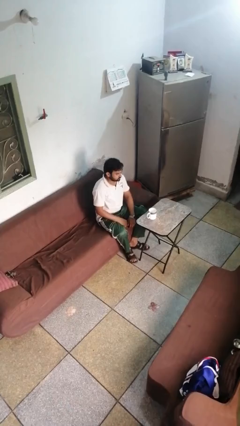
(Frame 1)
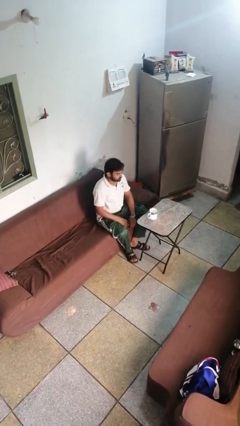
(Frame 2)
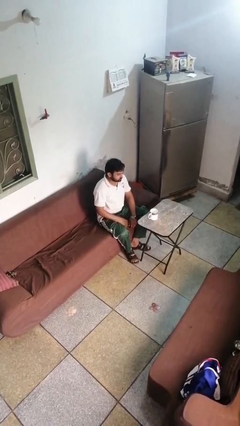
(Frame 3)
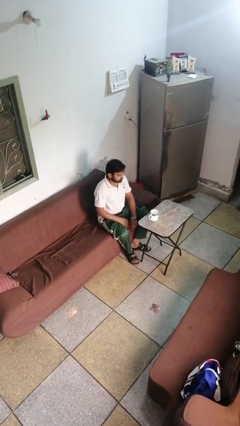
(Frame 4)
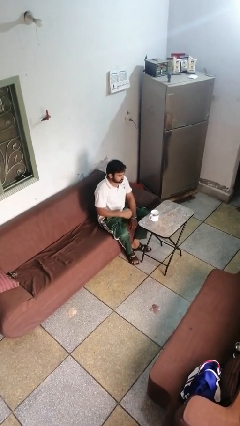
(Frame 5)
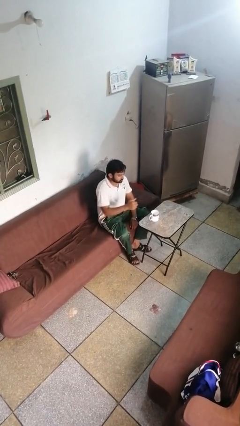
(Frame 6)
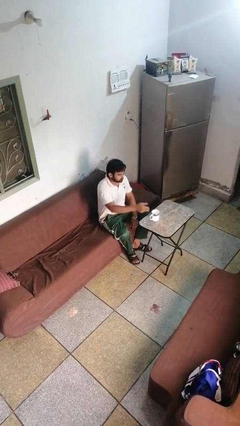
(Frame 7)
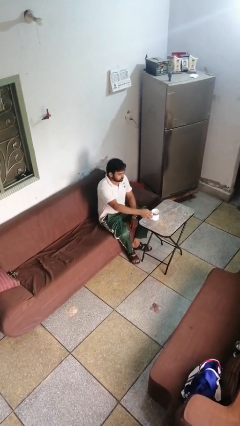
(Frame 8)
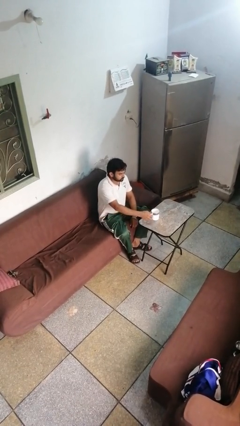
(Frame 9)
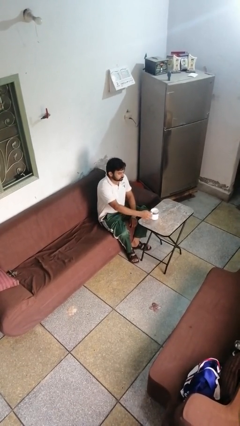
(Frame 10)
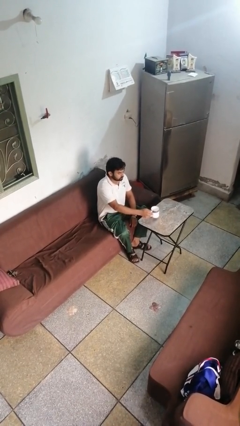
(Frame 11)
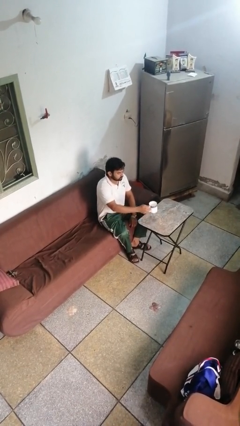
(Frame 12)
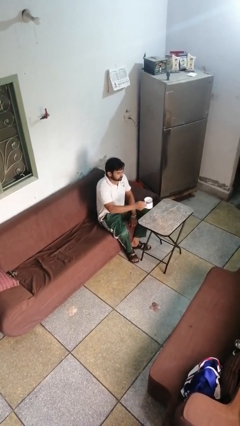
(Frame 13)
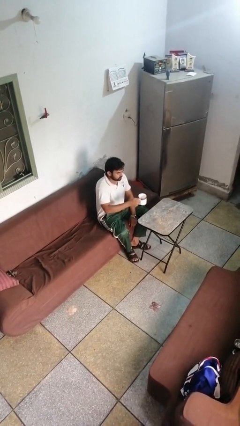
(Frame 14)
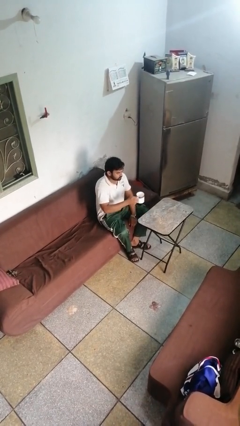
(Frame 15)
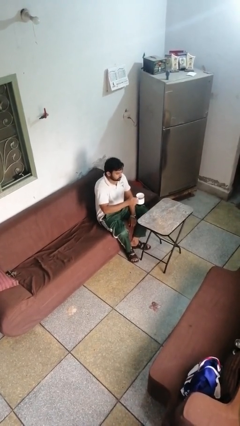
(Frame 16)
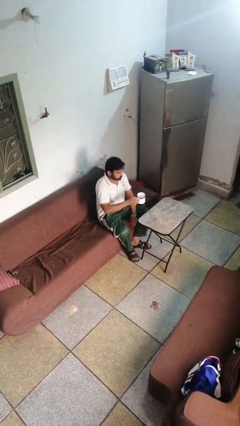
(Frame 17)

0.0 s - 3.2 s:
person picks up object from table

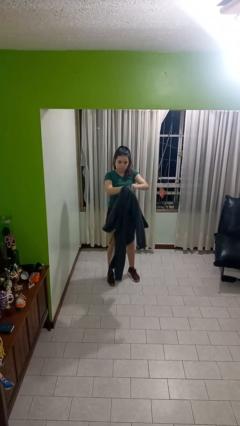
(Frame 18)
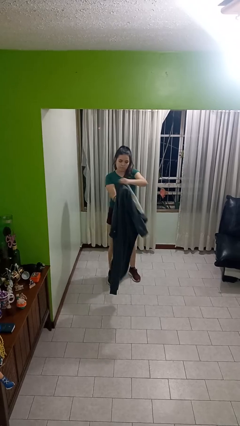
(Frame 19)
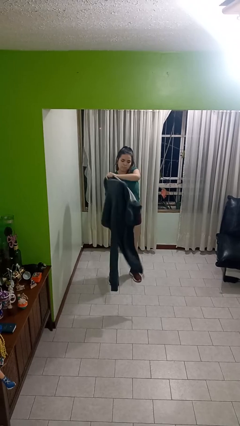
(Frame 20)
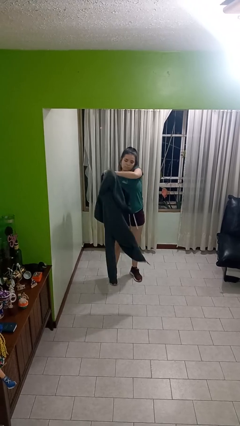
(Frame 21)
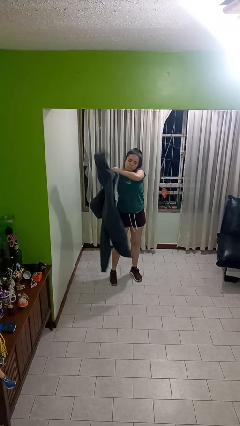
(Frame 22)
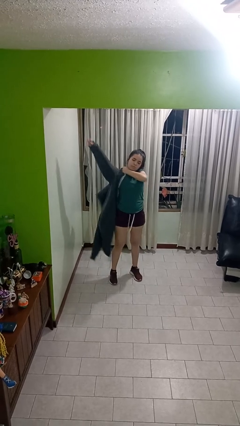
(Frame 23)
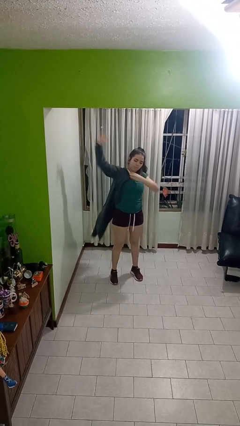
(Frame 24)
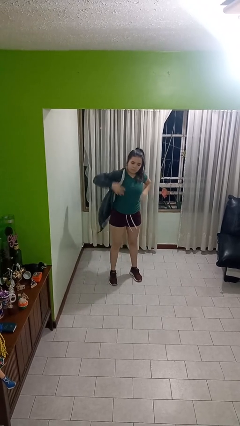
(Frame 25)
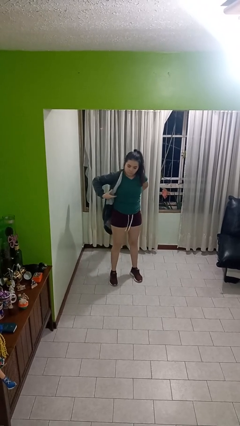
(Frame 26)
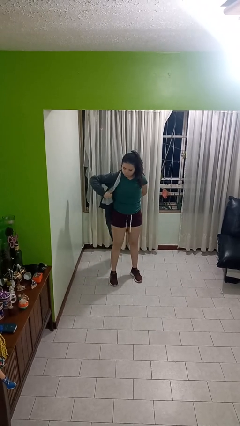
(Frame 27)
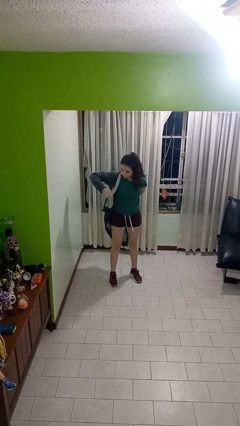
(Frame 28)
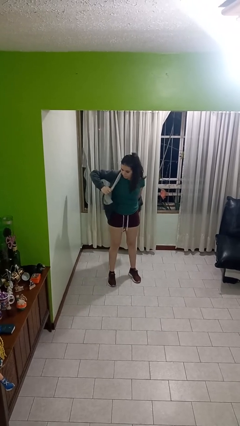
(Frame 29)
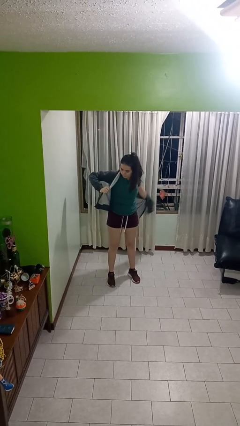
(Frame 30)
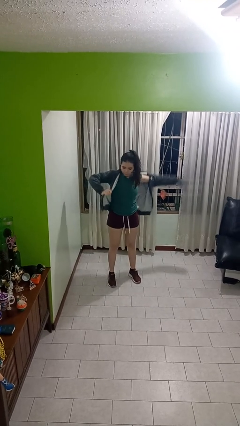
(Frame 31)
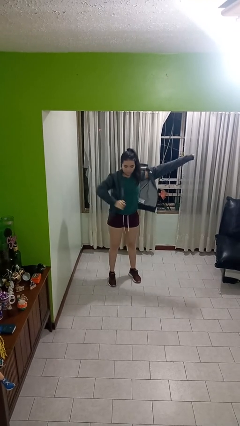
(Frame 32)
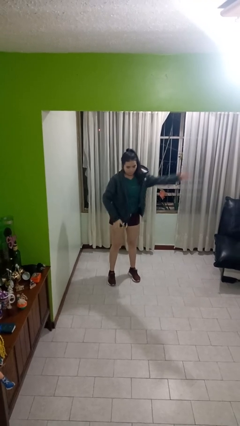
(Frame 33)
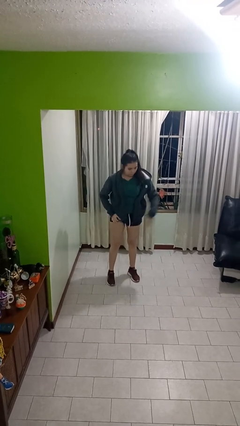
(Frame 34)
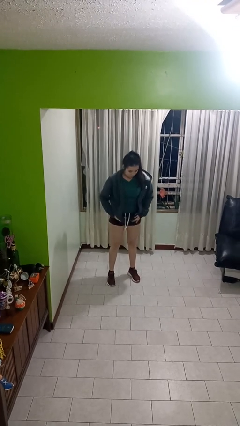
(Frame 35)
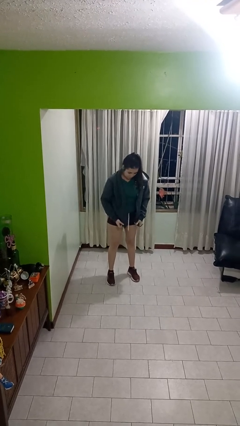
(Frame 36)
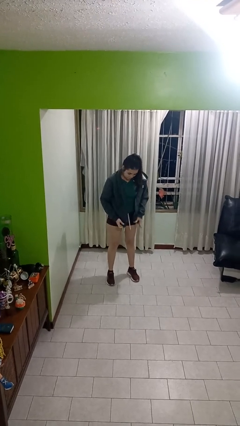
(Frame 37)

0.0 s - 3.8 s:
person puts on jacket

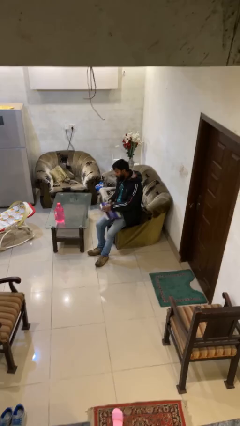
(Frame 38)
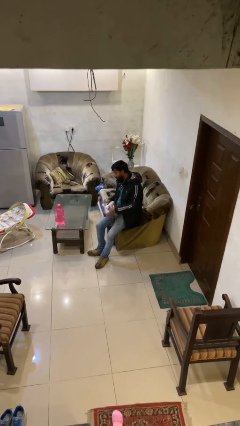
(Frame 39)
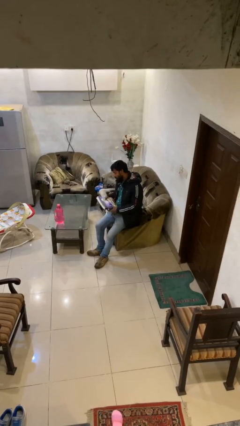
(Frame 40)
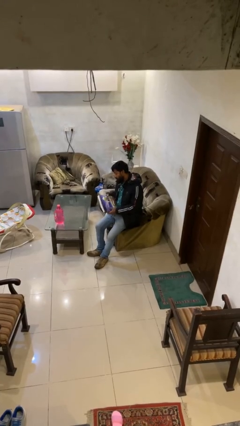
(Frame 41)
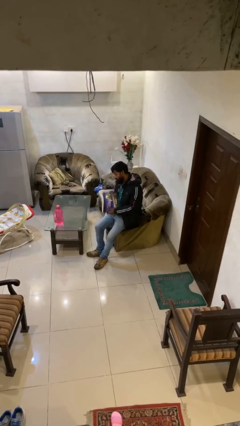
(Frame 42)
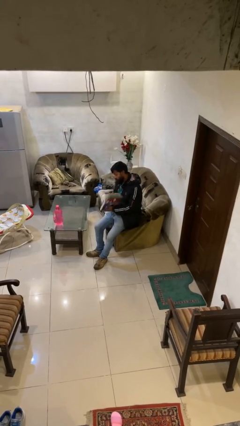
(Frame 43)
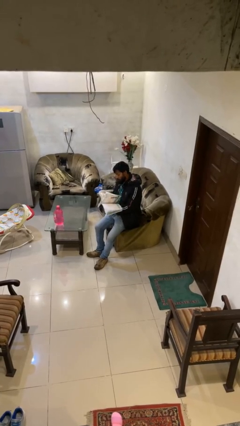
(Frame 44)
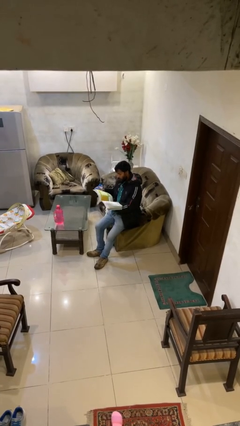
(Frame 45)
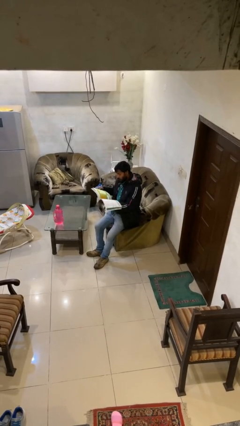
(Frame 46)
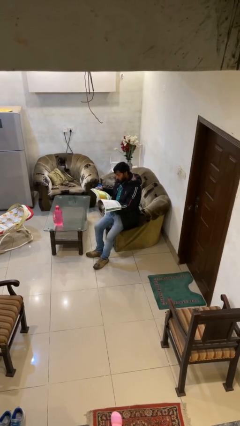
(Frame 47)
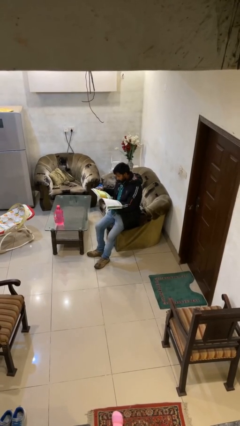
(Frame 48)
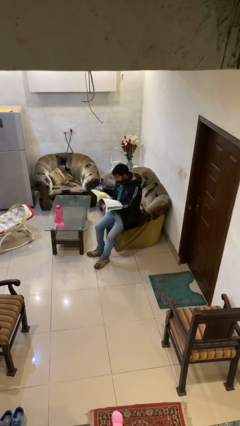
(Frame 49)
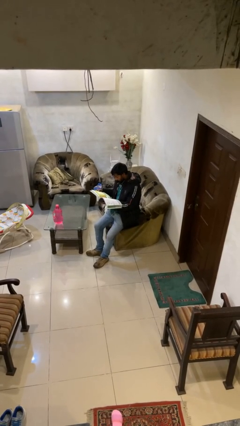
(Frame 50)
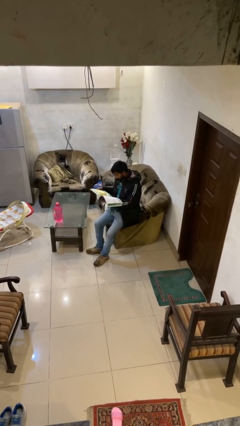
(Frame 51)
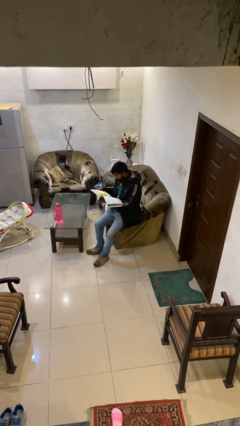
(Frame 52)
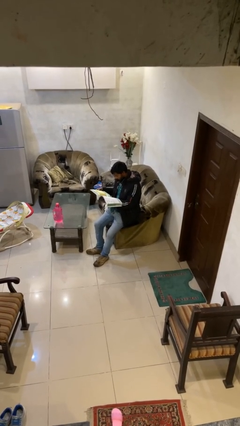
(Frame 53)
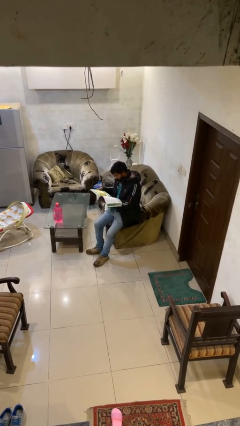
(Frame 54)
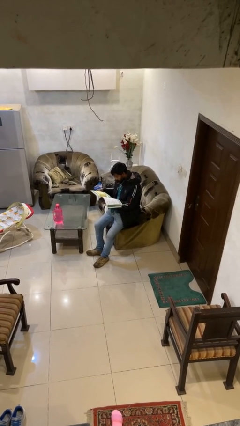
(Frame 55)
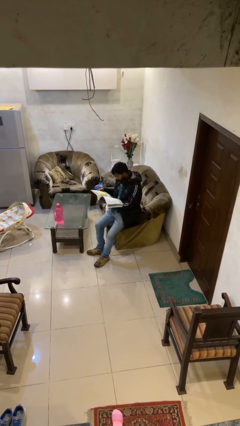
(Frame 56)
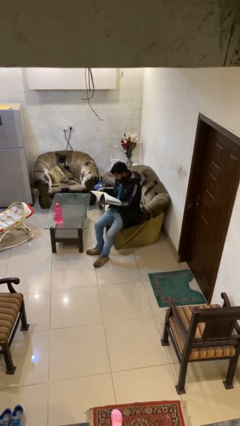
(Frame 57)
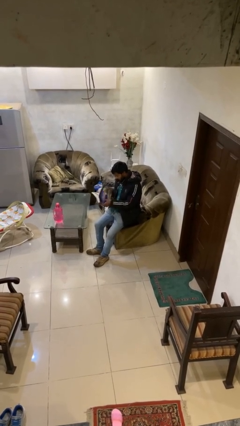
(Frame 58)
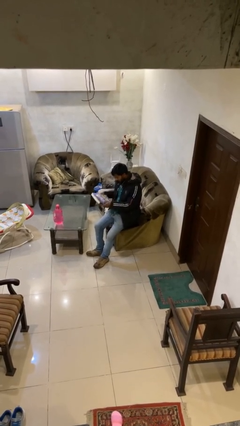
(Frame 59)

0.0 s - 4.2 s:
person reads document

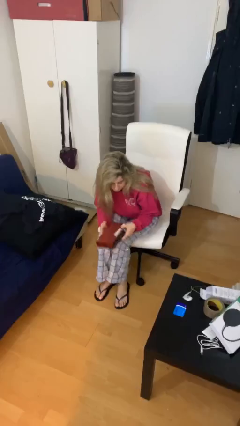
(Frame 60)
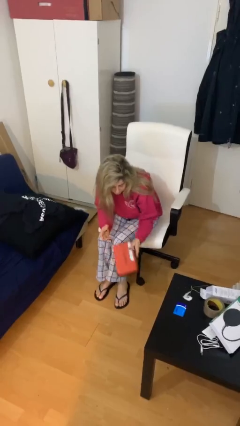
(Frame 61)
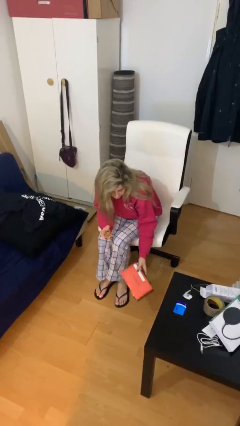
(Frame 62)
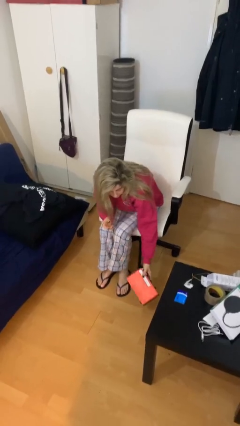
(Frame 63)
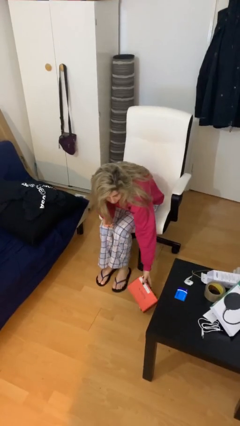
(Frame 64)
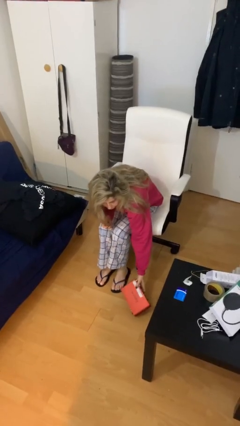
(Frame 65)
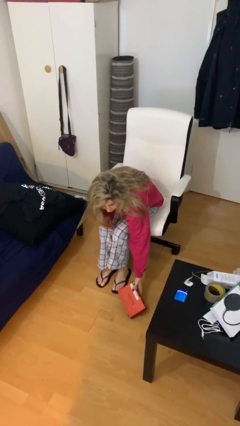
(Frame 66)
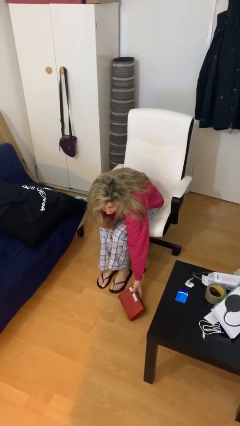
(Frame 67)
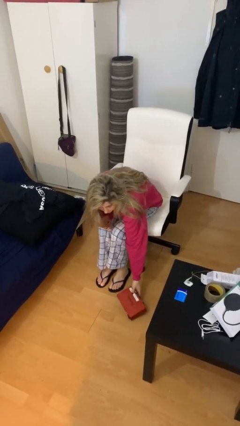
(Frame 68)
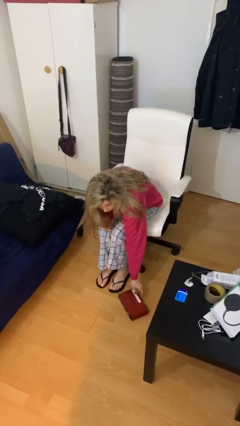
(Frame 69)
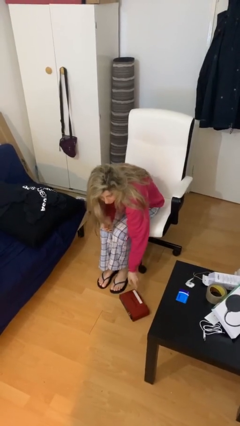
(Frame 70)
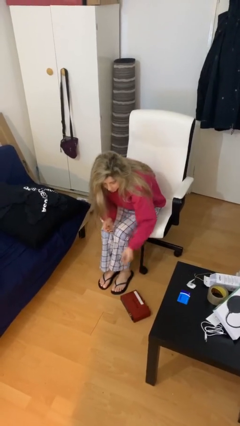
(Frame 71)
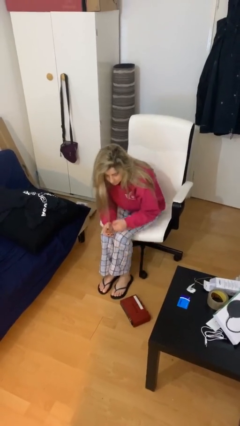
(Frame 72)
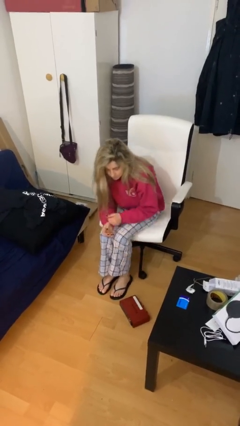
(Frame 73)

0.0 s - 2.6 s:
person puts down object on floor

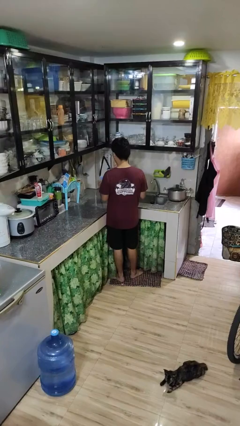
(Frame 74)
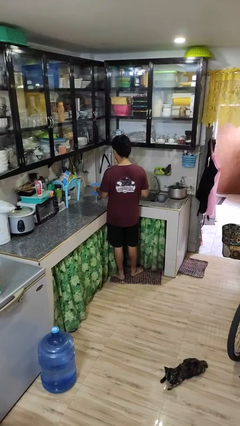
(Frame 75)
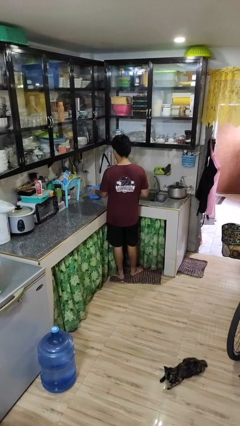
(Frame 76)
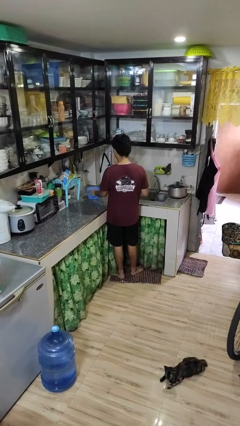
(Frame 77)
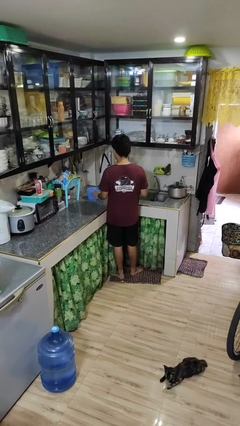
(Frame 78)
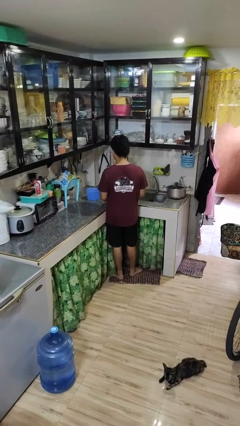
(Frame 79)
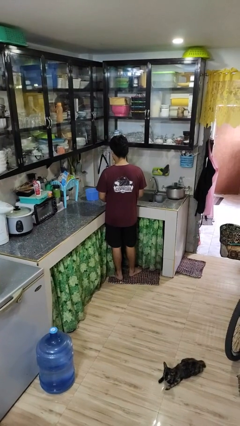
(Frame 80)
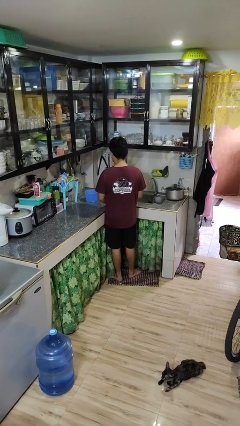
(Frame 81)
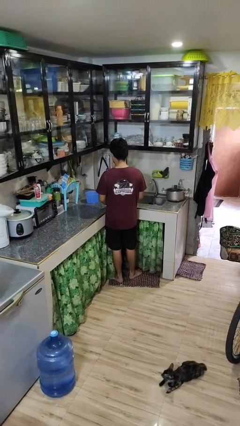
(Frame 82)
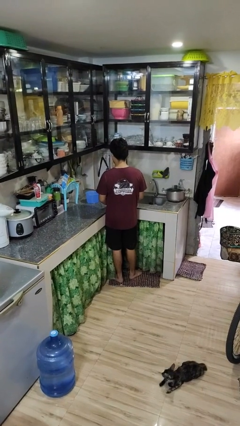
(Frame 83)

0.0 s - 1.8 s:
person puts down object on countertop

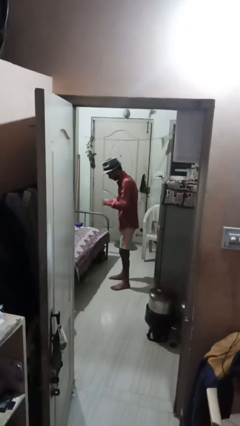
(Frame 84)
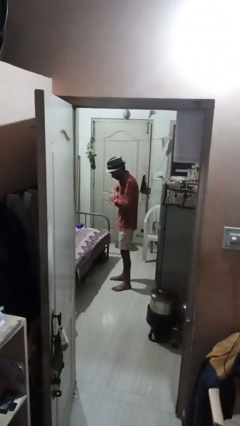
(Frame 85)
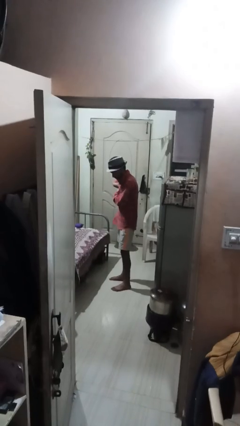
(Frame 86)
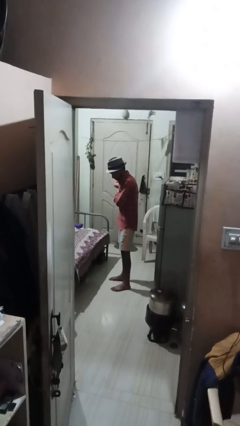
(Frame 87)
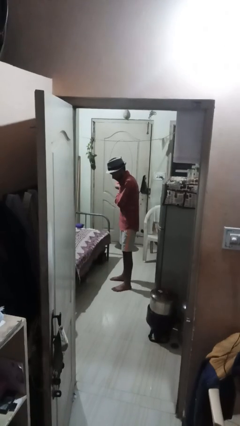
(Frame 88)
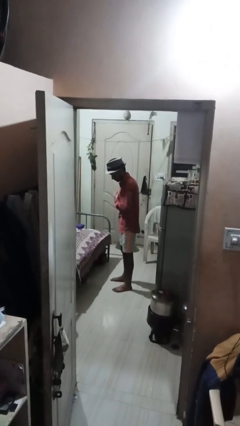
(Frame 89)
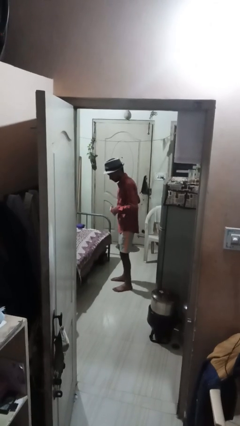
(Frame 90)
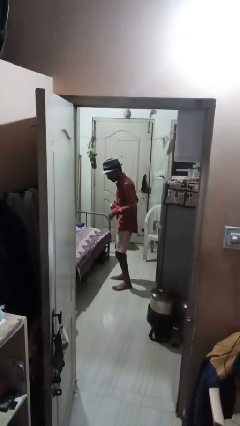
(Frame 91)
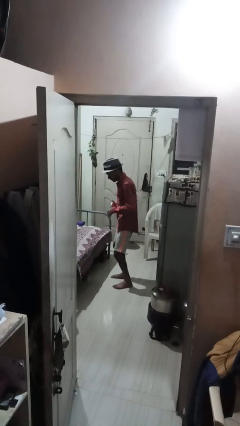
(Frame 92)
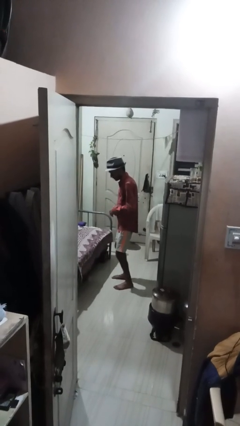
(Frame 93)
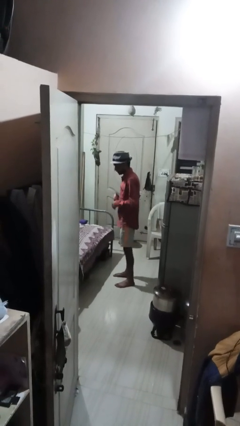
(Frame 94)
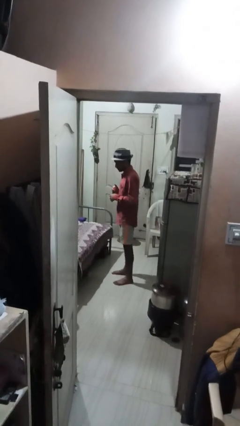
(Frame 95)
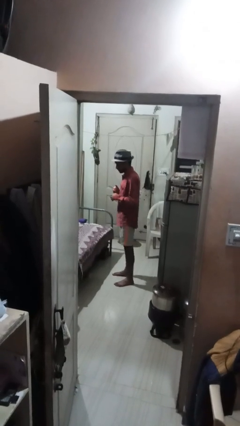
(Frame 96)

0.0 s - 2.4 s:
person applies deodorant
